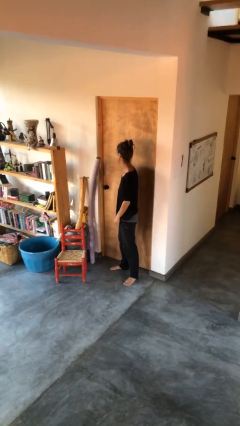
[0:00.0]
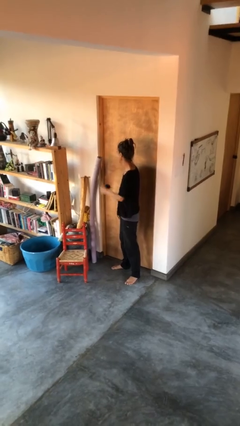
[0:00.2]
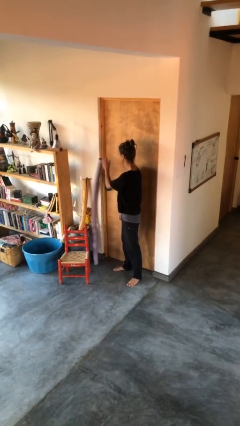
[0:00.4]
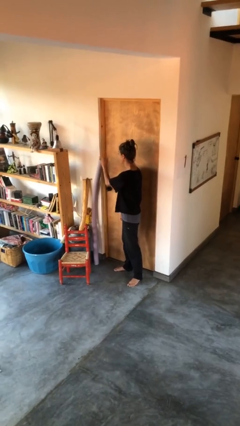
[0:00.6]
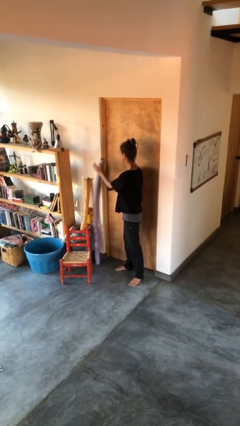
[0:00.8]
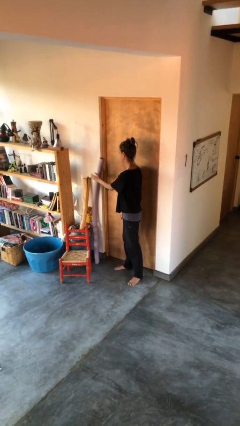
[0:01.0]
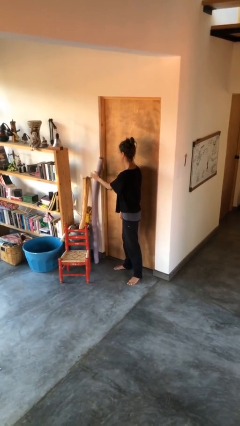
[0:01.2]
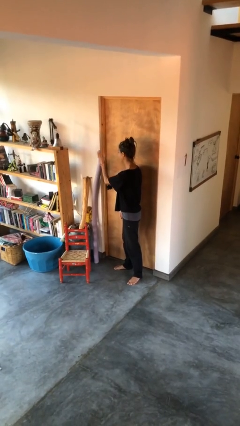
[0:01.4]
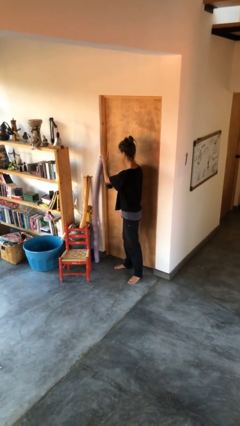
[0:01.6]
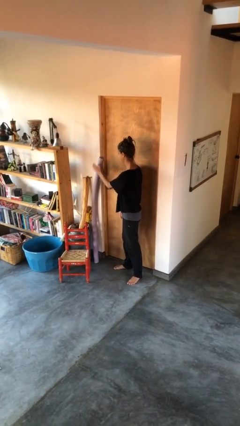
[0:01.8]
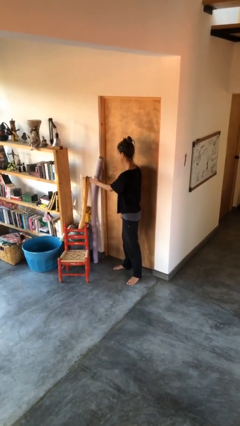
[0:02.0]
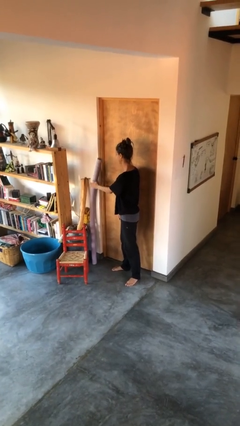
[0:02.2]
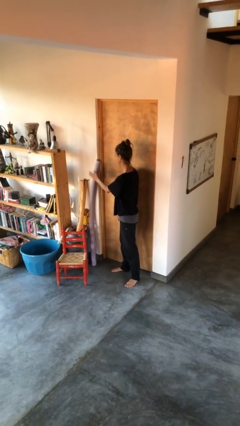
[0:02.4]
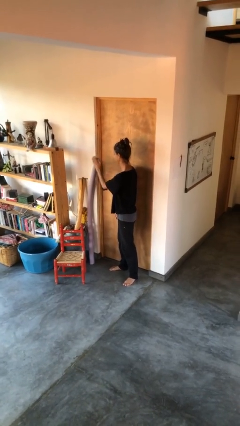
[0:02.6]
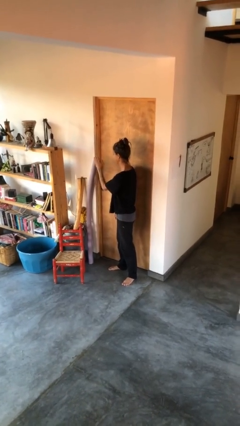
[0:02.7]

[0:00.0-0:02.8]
person waves hand over object

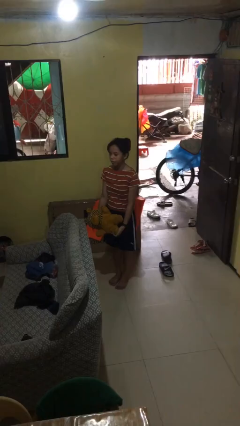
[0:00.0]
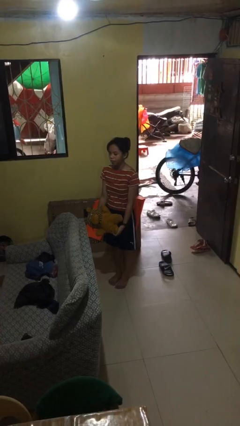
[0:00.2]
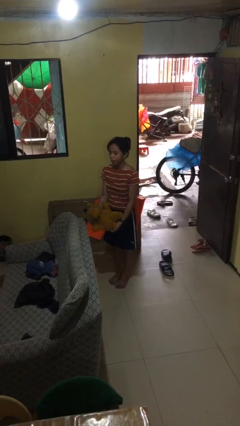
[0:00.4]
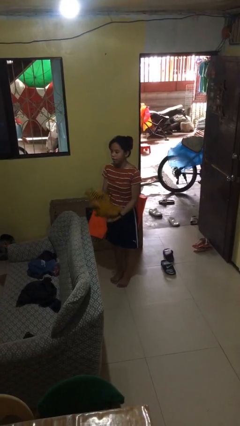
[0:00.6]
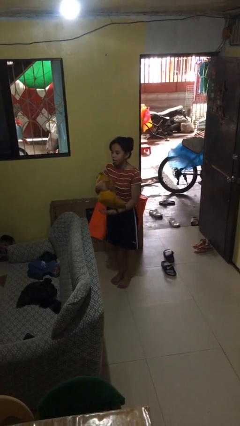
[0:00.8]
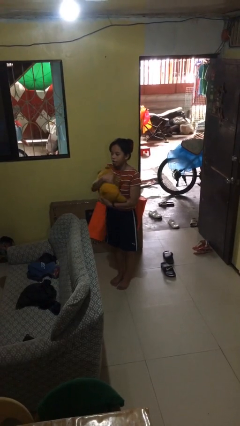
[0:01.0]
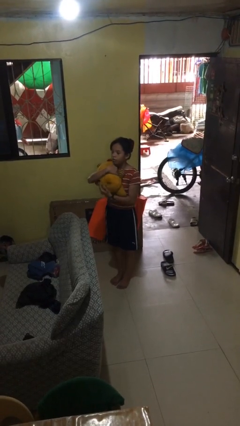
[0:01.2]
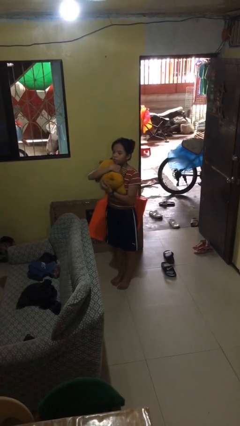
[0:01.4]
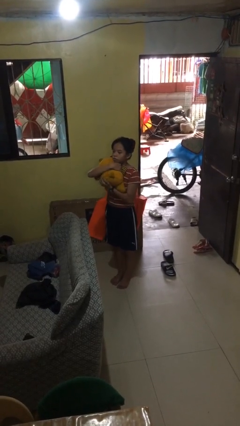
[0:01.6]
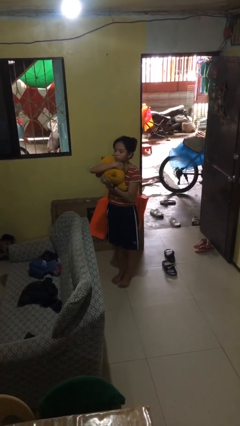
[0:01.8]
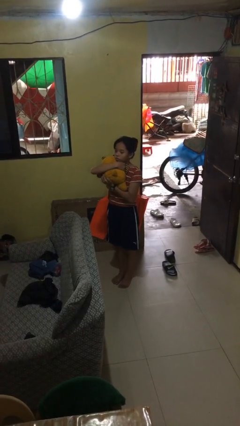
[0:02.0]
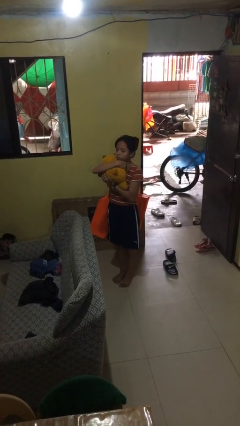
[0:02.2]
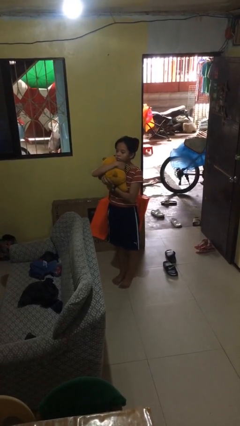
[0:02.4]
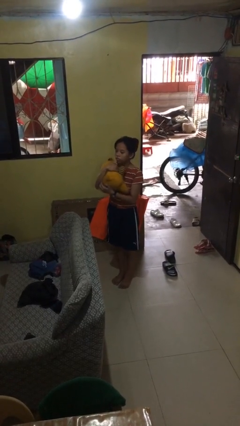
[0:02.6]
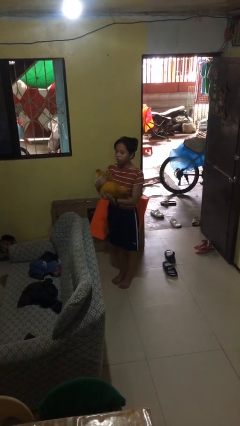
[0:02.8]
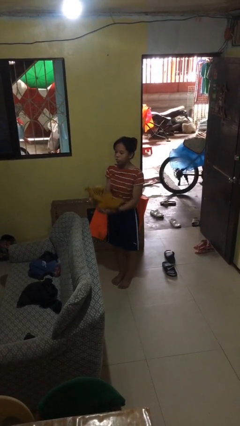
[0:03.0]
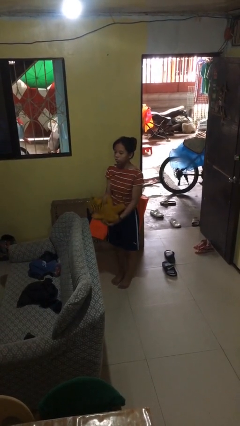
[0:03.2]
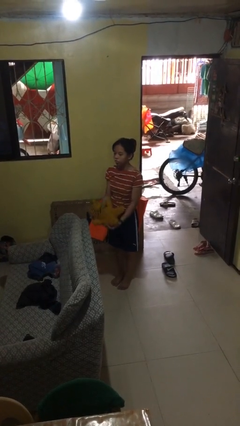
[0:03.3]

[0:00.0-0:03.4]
person hugs stuffed animal

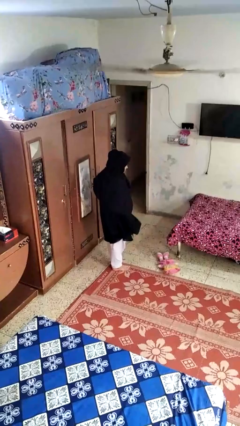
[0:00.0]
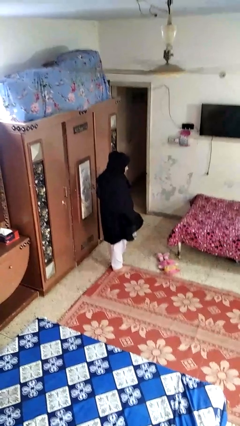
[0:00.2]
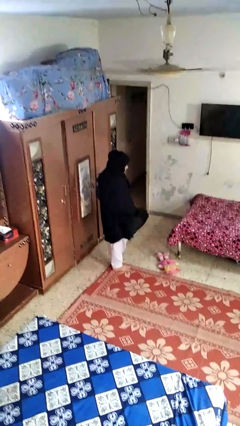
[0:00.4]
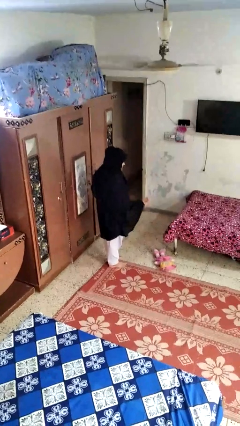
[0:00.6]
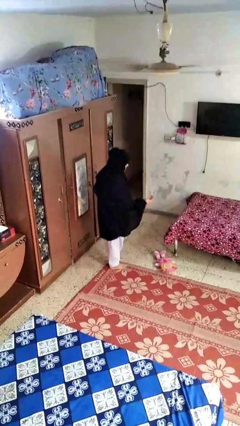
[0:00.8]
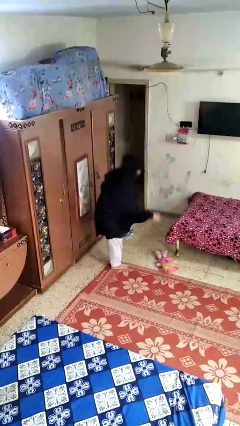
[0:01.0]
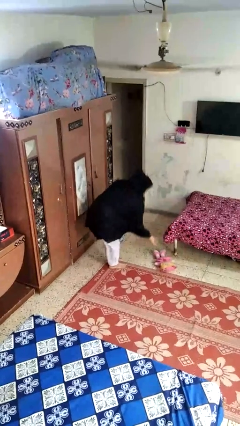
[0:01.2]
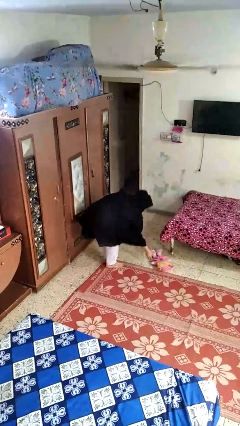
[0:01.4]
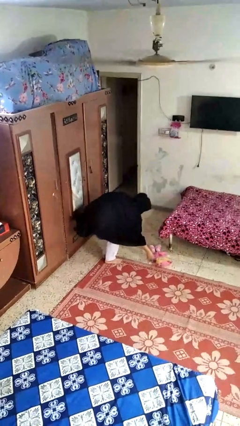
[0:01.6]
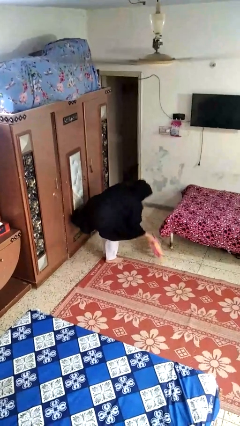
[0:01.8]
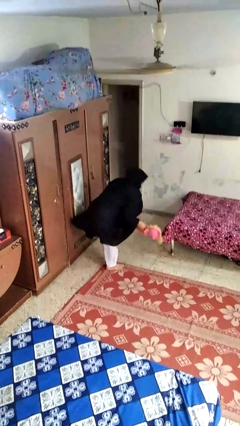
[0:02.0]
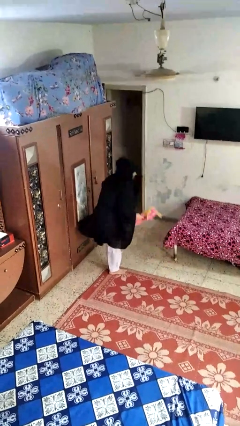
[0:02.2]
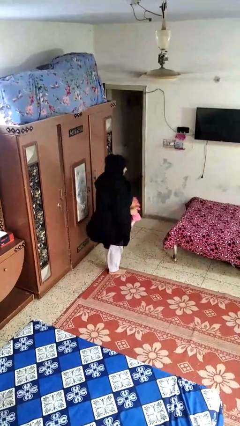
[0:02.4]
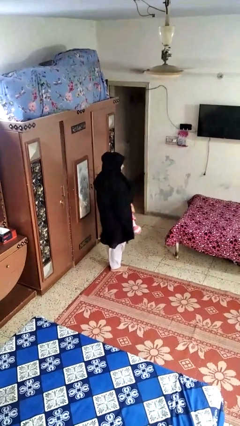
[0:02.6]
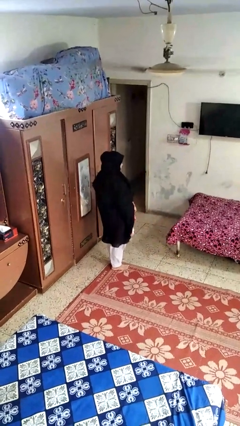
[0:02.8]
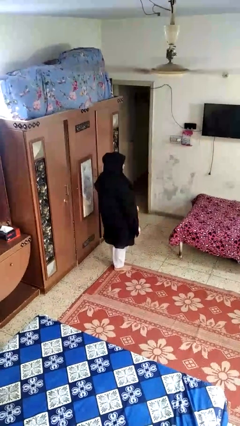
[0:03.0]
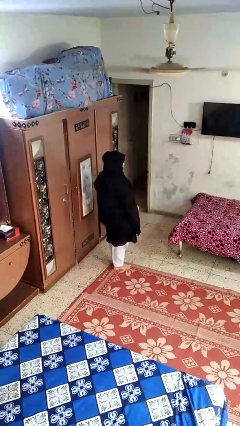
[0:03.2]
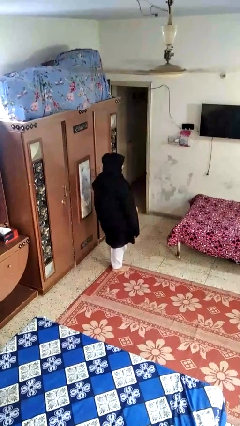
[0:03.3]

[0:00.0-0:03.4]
person picks up object from floor

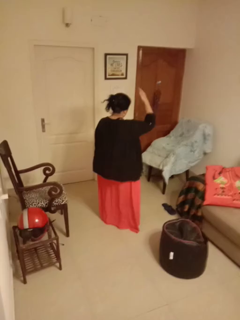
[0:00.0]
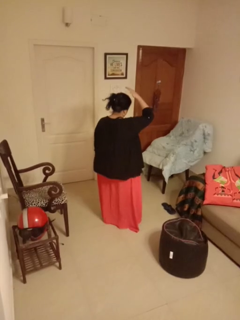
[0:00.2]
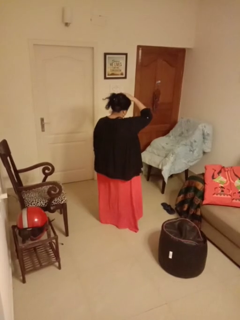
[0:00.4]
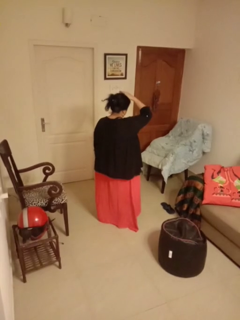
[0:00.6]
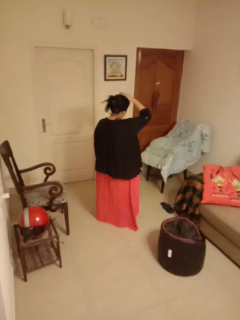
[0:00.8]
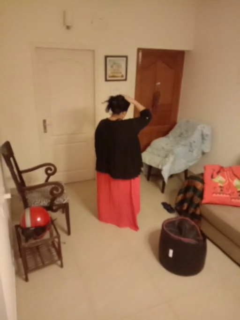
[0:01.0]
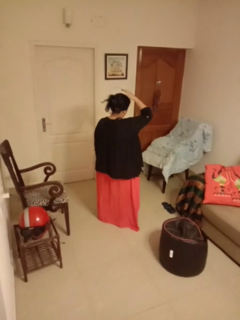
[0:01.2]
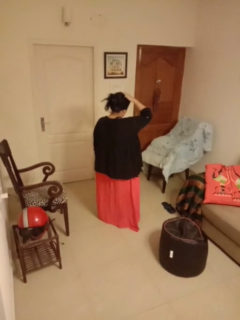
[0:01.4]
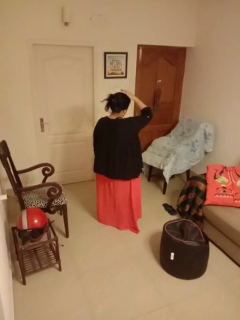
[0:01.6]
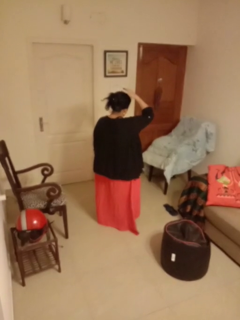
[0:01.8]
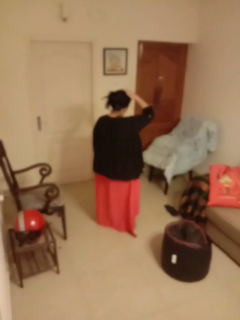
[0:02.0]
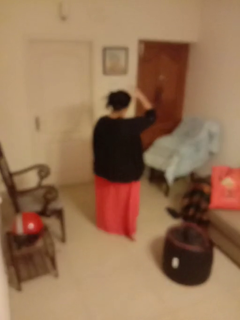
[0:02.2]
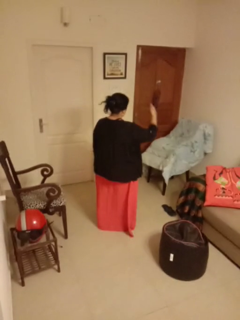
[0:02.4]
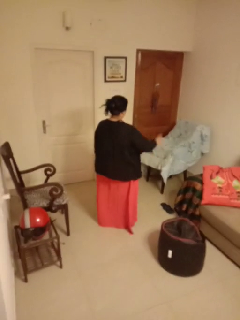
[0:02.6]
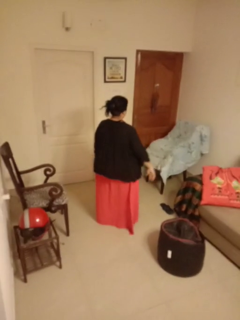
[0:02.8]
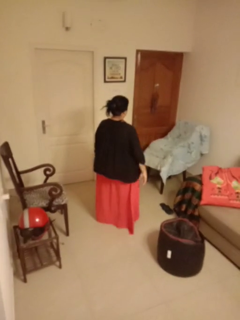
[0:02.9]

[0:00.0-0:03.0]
person pats head

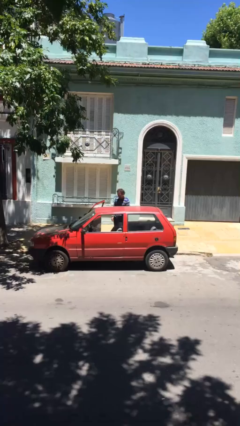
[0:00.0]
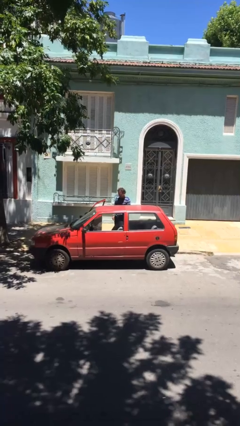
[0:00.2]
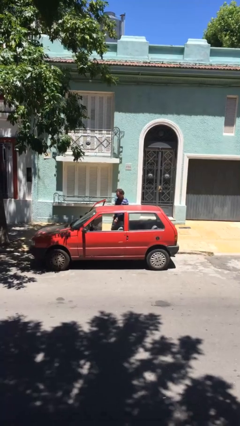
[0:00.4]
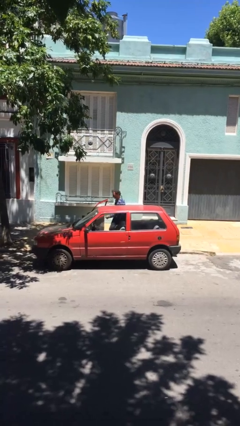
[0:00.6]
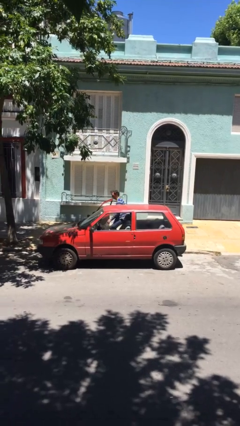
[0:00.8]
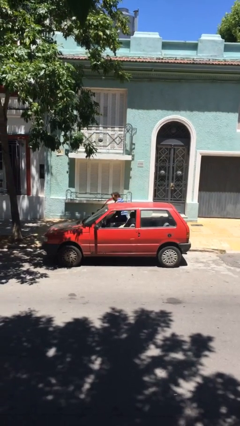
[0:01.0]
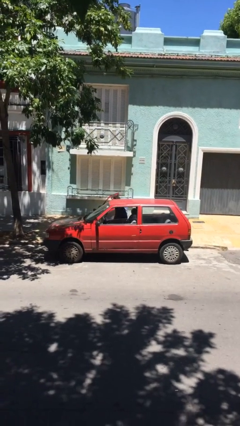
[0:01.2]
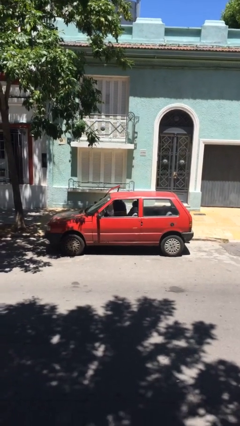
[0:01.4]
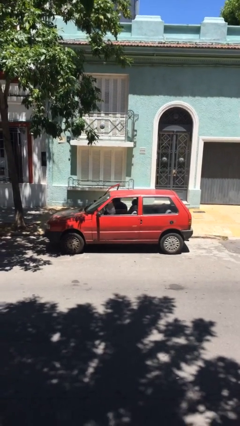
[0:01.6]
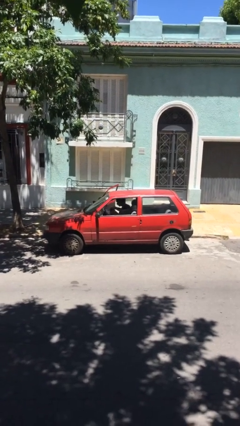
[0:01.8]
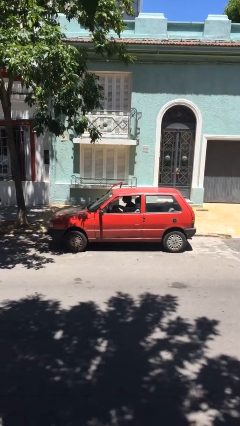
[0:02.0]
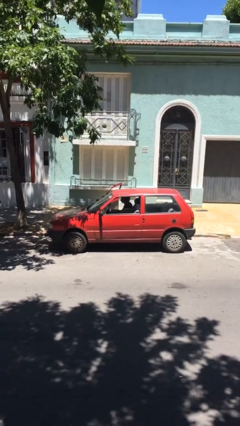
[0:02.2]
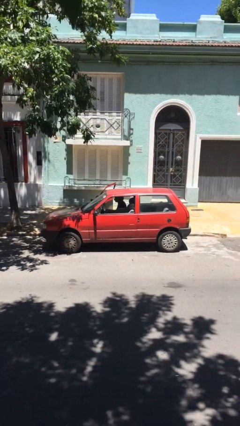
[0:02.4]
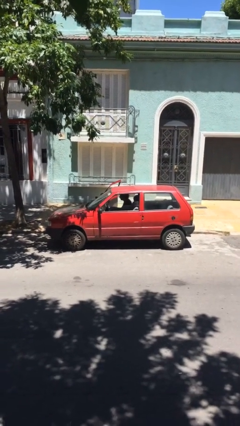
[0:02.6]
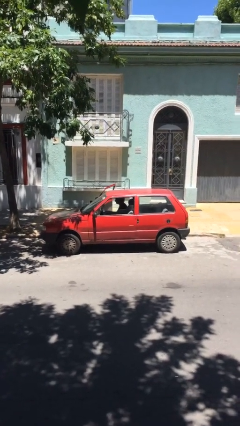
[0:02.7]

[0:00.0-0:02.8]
person enters car

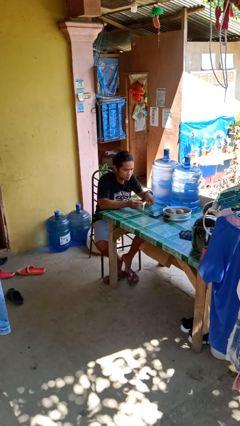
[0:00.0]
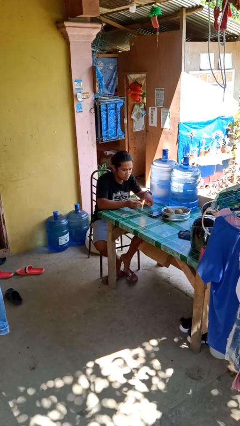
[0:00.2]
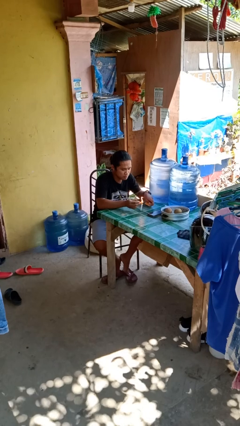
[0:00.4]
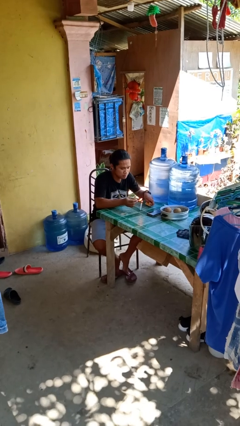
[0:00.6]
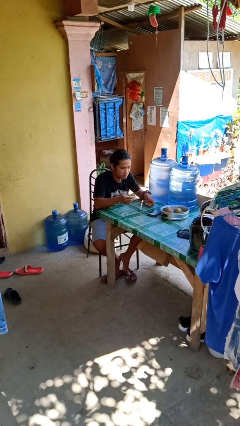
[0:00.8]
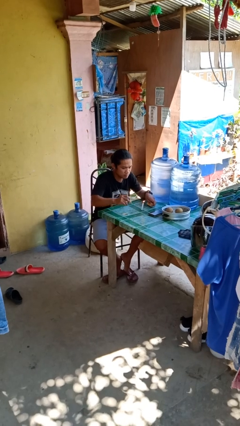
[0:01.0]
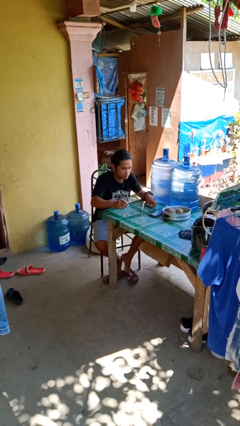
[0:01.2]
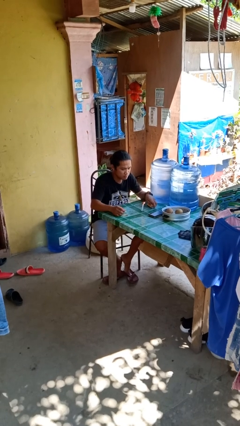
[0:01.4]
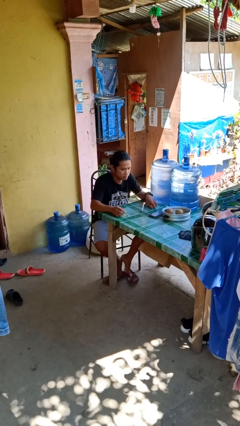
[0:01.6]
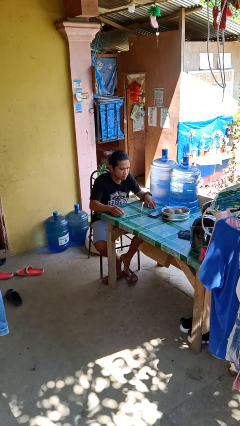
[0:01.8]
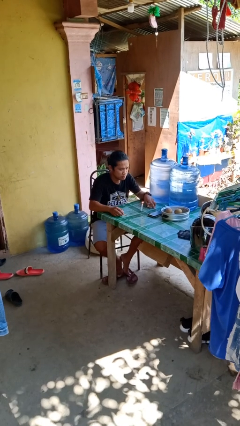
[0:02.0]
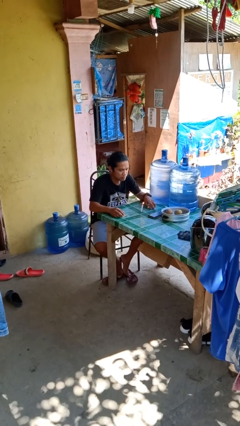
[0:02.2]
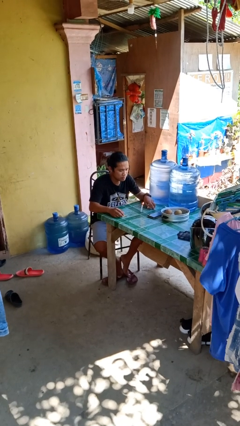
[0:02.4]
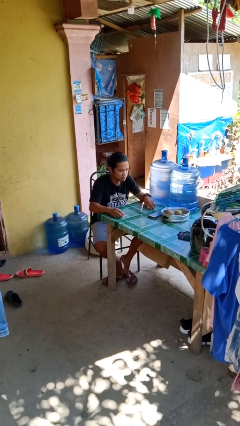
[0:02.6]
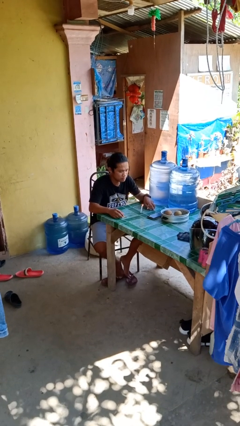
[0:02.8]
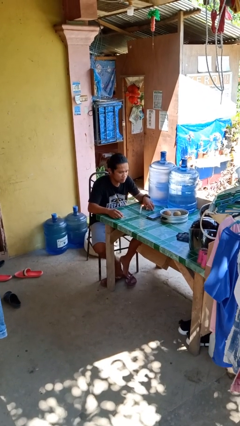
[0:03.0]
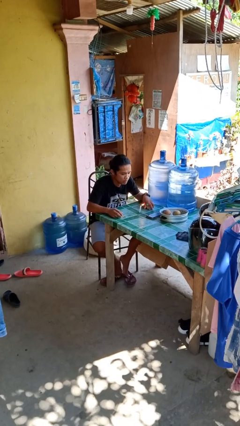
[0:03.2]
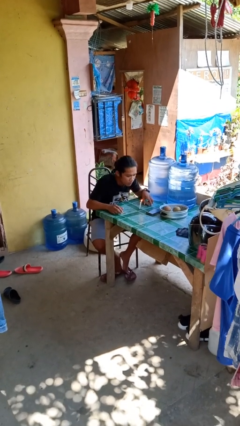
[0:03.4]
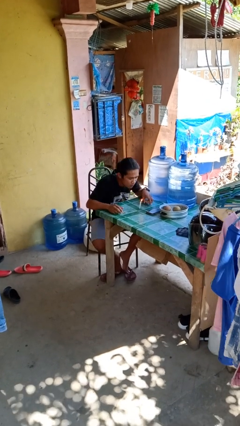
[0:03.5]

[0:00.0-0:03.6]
person lights candle
